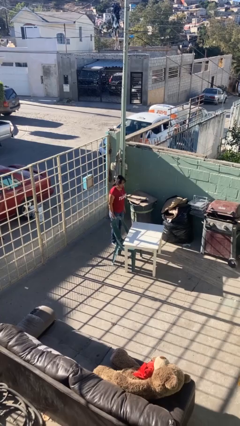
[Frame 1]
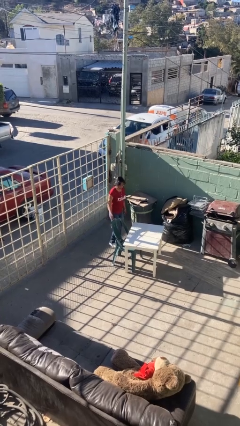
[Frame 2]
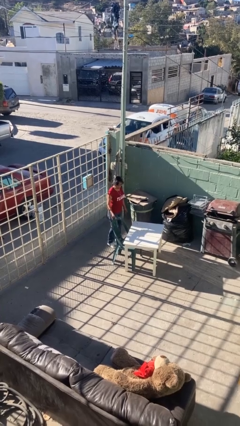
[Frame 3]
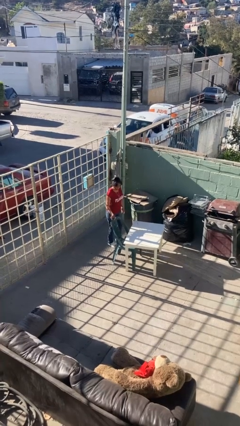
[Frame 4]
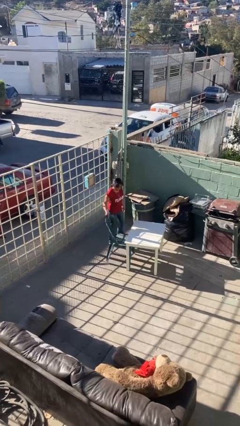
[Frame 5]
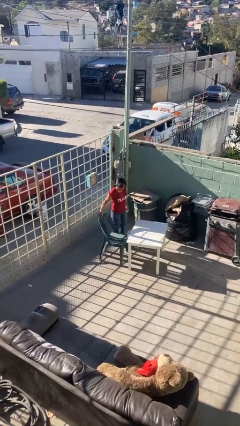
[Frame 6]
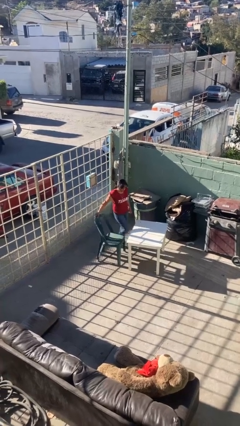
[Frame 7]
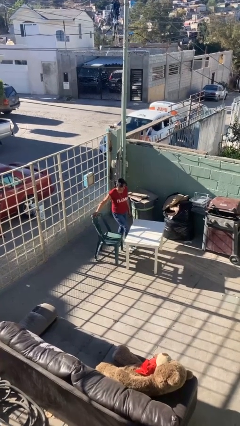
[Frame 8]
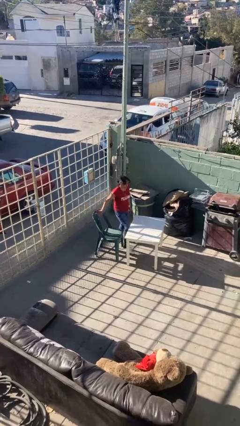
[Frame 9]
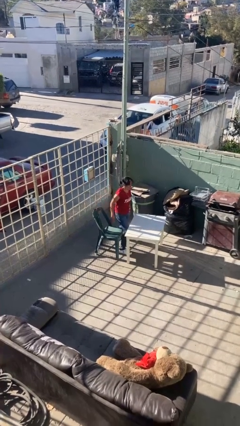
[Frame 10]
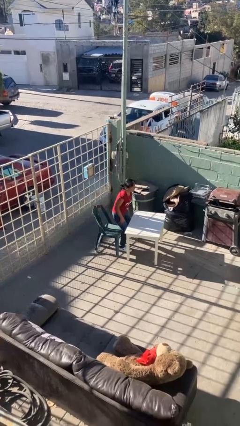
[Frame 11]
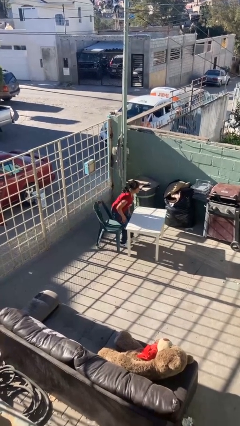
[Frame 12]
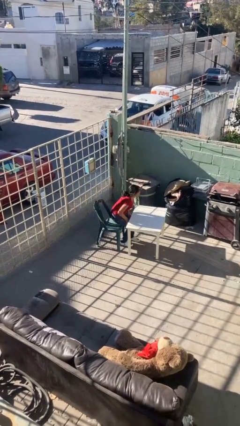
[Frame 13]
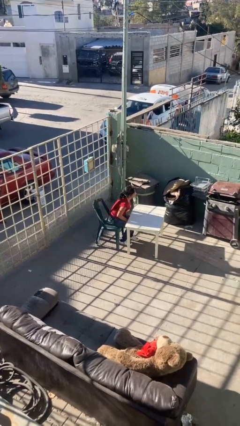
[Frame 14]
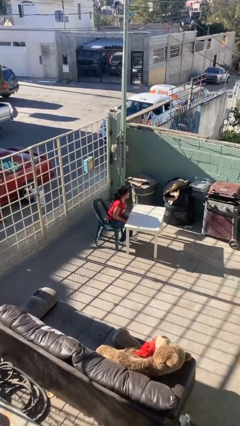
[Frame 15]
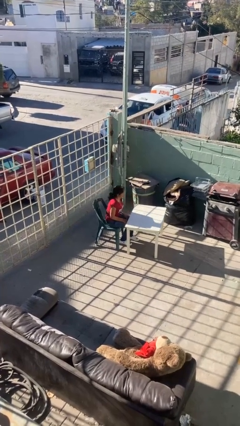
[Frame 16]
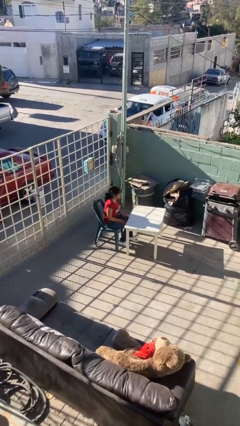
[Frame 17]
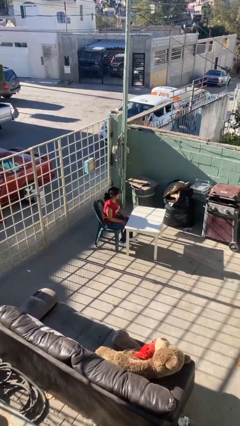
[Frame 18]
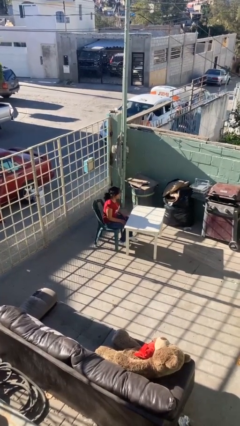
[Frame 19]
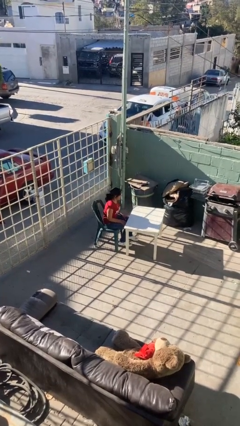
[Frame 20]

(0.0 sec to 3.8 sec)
person sits down

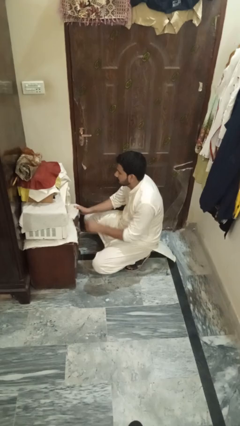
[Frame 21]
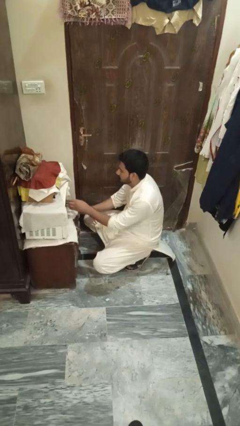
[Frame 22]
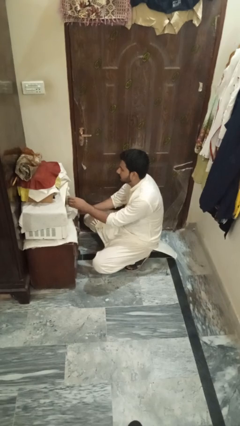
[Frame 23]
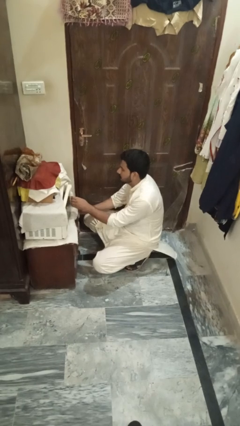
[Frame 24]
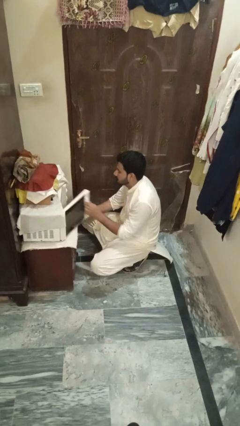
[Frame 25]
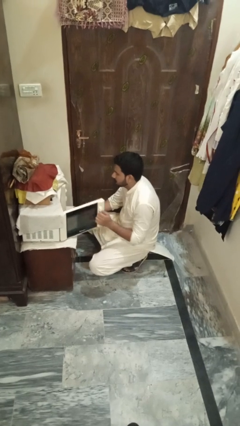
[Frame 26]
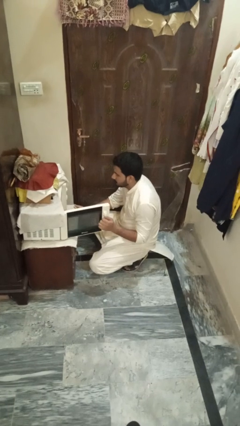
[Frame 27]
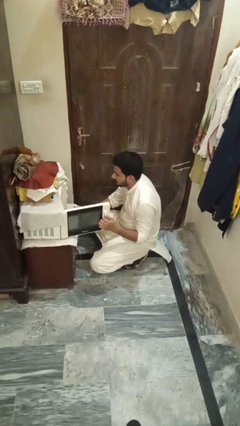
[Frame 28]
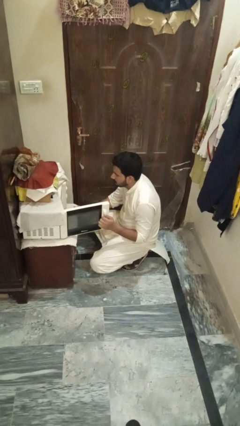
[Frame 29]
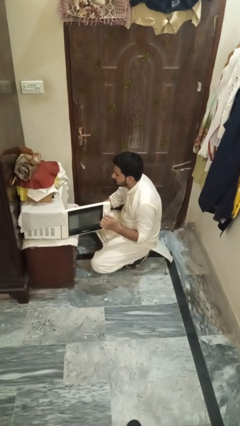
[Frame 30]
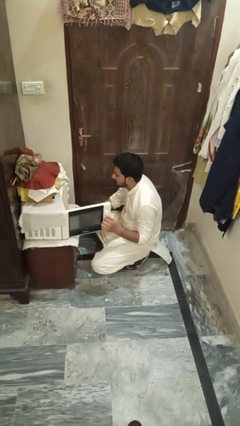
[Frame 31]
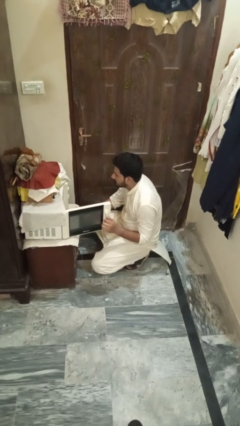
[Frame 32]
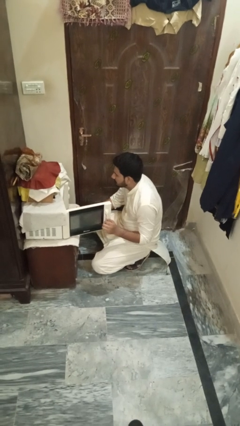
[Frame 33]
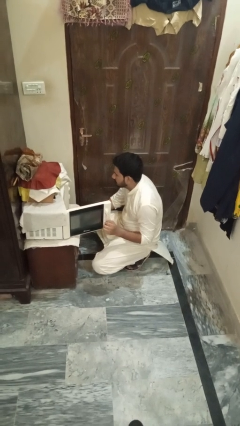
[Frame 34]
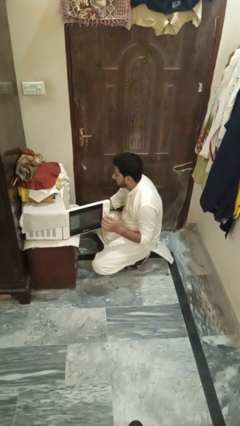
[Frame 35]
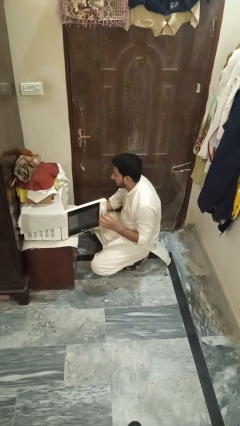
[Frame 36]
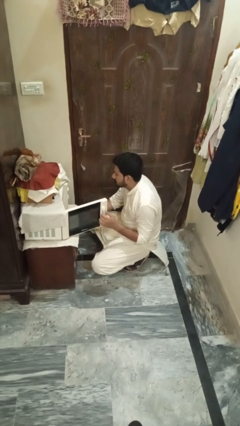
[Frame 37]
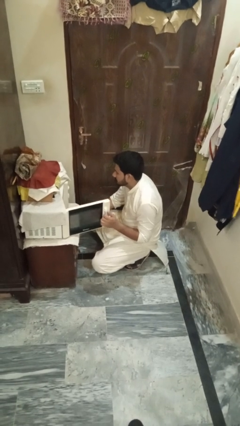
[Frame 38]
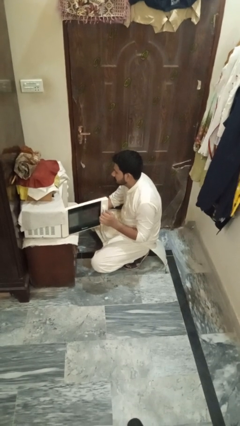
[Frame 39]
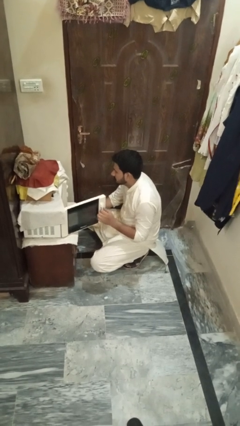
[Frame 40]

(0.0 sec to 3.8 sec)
person opens microwave

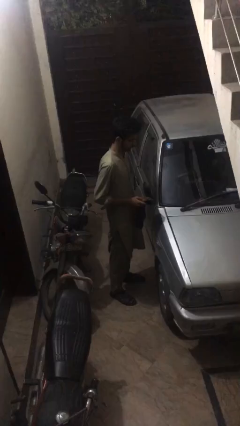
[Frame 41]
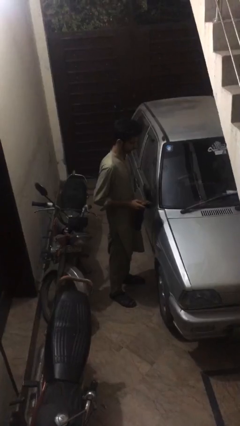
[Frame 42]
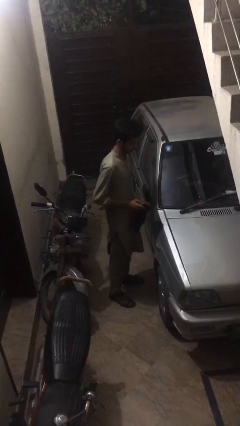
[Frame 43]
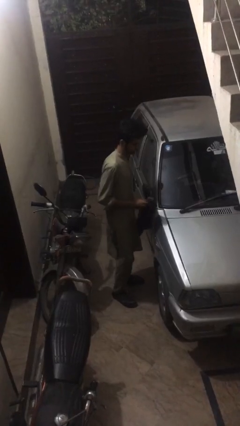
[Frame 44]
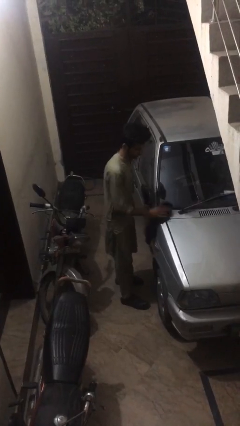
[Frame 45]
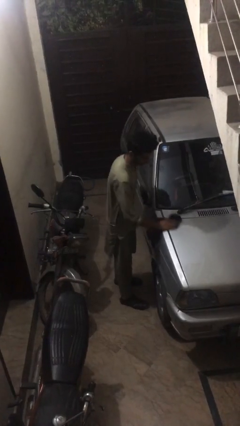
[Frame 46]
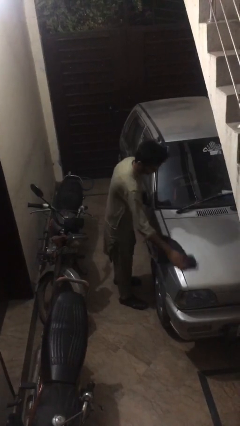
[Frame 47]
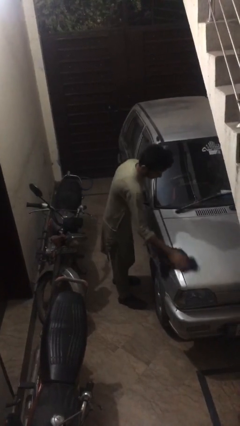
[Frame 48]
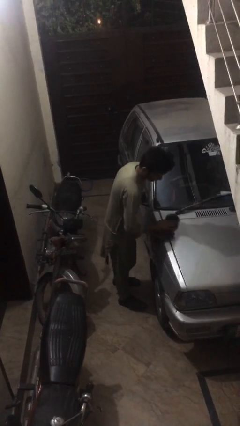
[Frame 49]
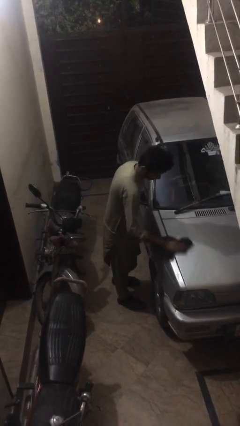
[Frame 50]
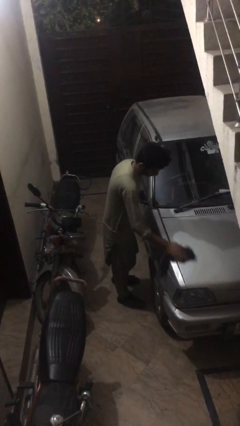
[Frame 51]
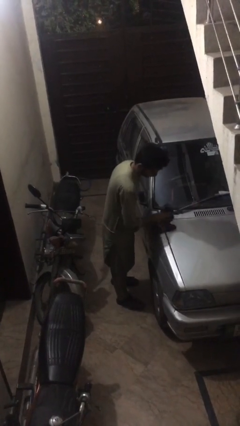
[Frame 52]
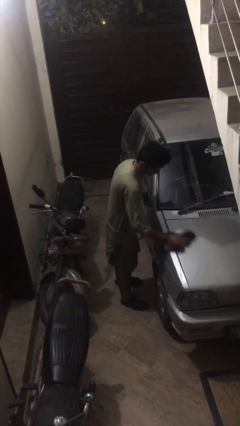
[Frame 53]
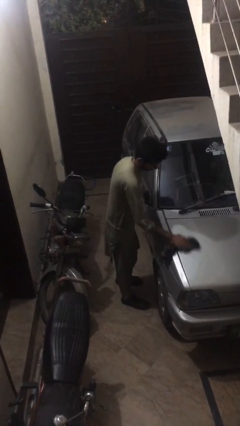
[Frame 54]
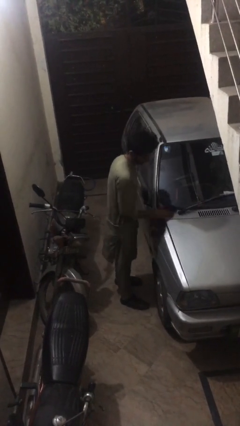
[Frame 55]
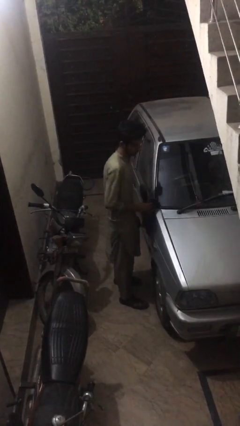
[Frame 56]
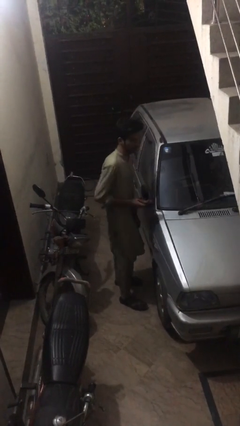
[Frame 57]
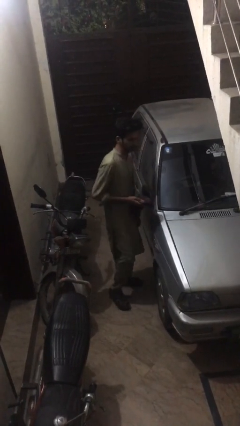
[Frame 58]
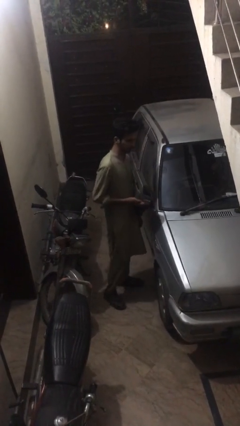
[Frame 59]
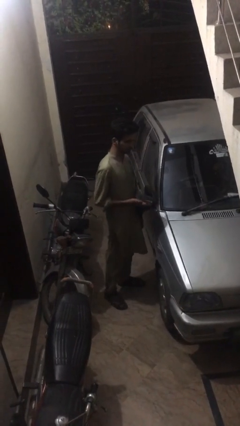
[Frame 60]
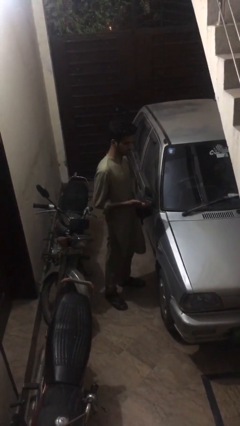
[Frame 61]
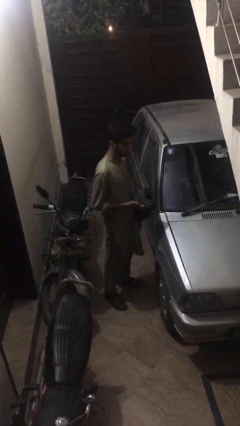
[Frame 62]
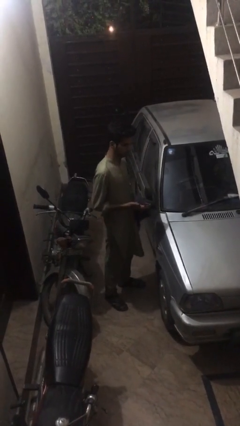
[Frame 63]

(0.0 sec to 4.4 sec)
person polishes car with rag

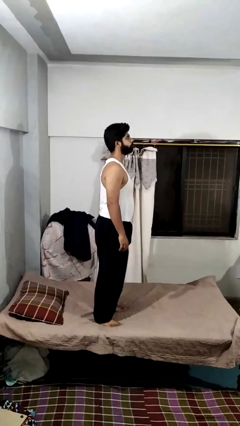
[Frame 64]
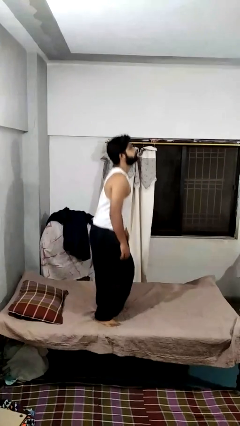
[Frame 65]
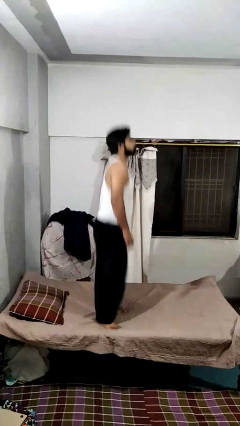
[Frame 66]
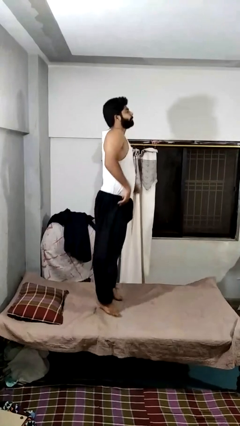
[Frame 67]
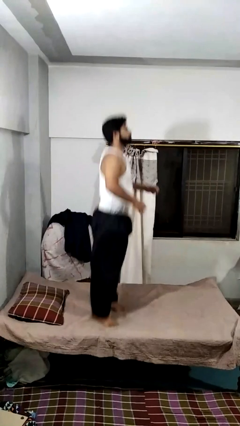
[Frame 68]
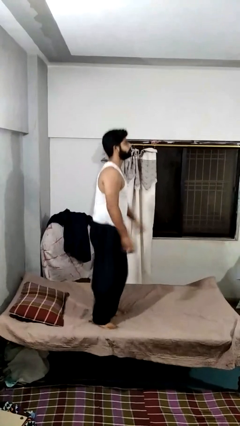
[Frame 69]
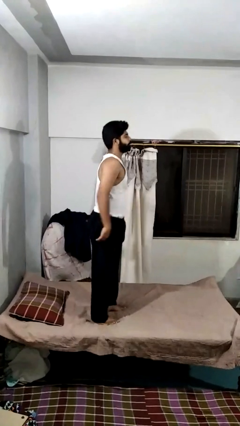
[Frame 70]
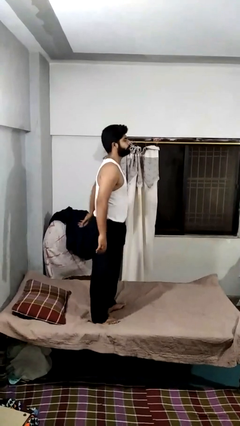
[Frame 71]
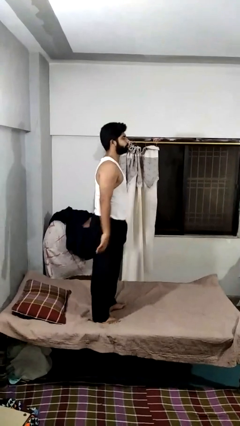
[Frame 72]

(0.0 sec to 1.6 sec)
person jumps on bed

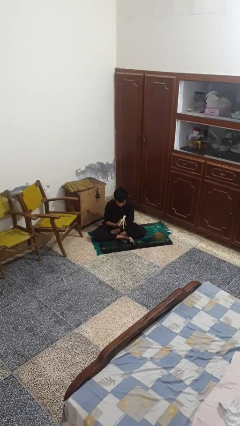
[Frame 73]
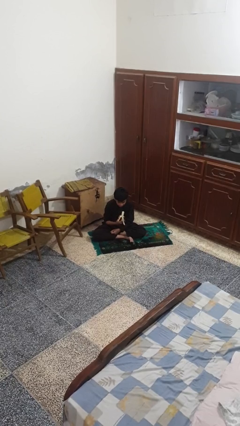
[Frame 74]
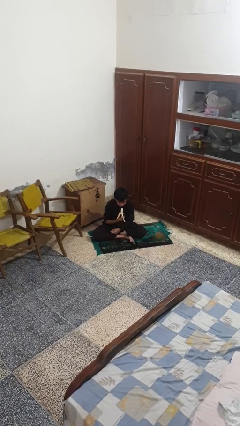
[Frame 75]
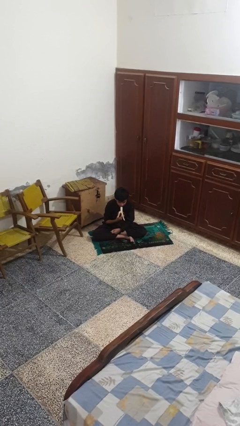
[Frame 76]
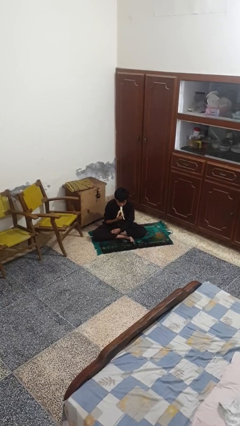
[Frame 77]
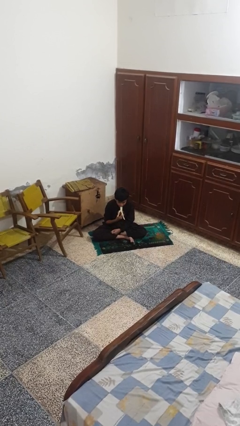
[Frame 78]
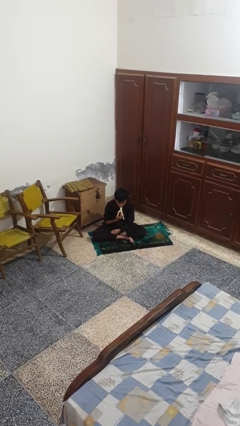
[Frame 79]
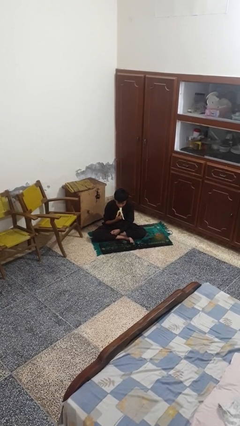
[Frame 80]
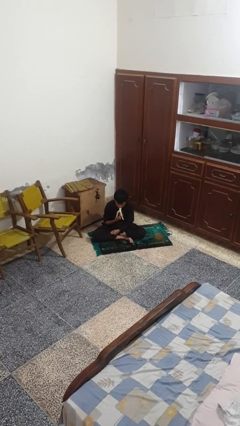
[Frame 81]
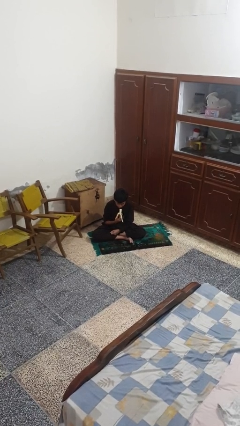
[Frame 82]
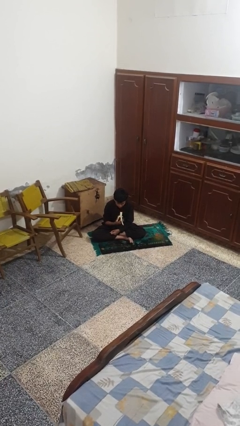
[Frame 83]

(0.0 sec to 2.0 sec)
person eats banana

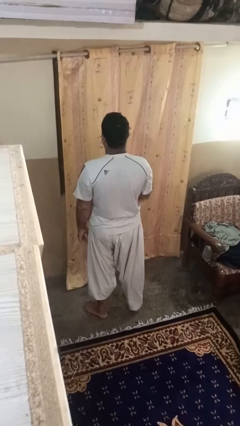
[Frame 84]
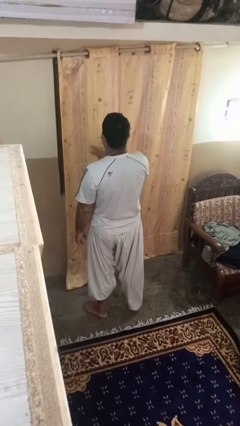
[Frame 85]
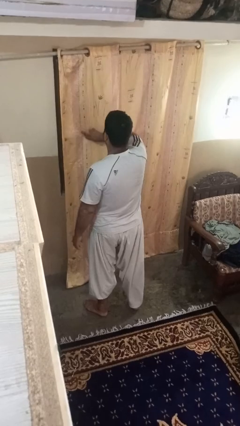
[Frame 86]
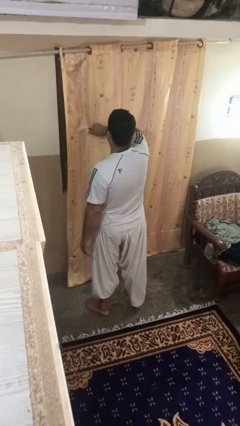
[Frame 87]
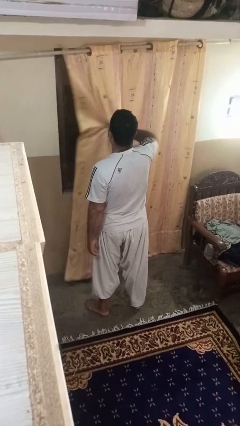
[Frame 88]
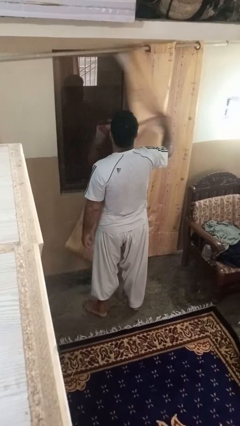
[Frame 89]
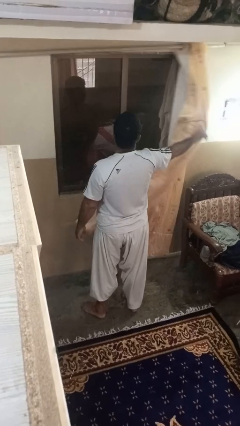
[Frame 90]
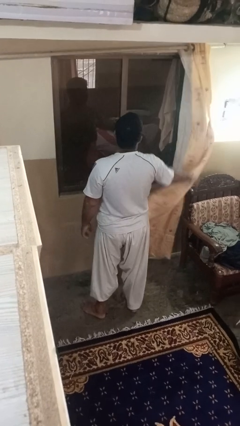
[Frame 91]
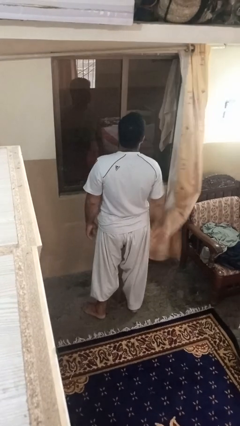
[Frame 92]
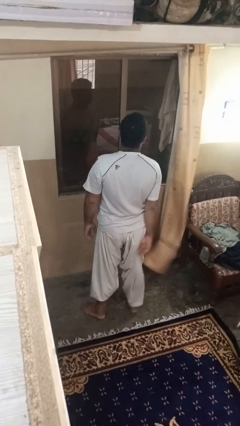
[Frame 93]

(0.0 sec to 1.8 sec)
person opens curtains
